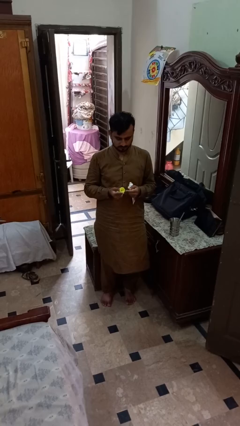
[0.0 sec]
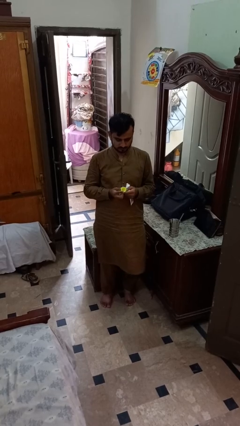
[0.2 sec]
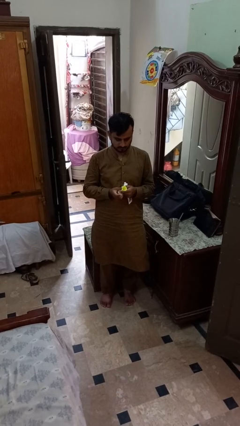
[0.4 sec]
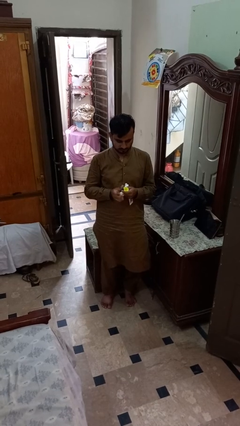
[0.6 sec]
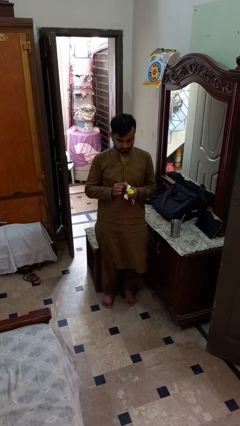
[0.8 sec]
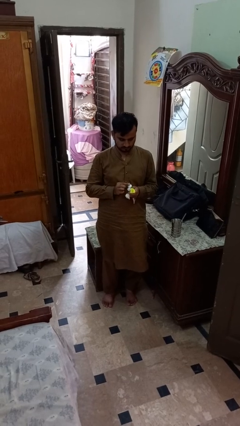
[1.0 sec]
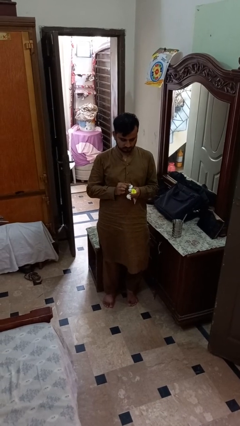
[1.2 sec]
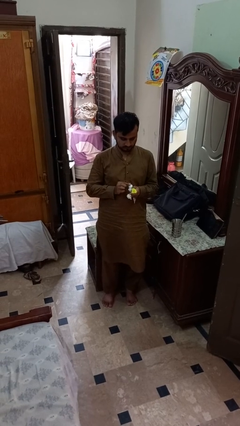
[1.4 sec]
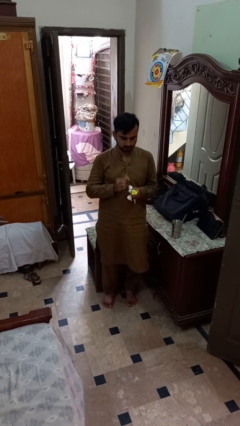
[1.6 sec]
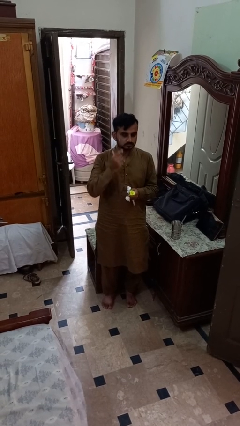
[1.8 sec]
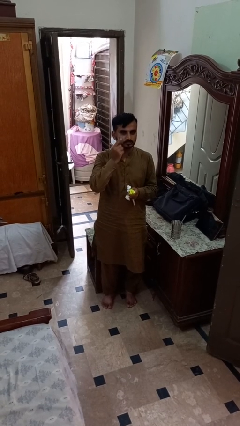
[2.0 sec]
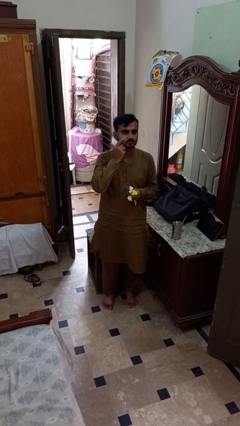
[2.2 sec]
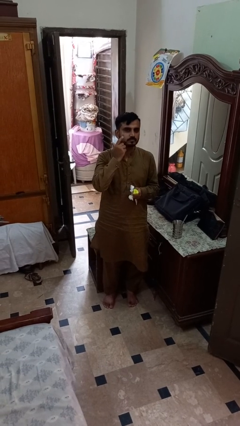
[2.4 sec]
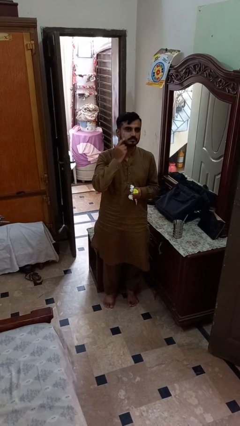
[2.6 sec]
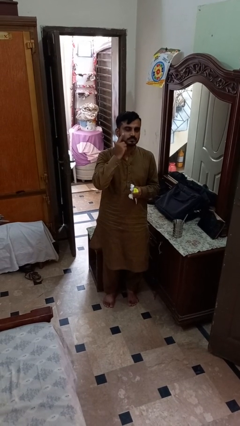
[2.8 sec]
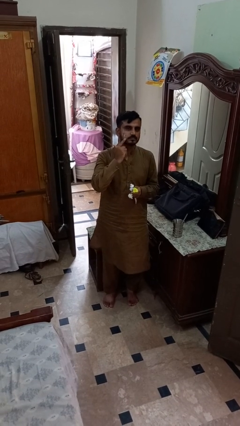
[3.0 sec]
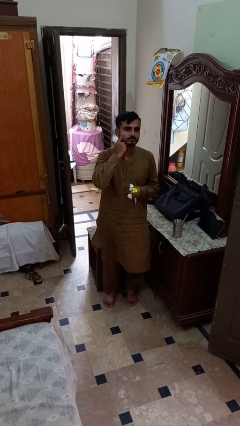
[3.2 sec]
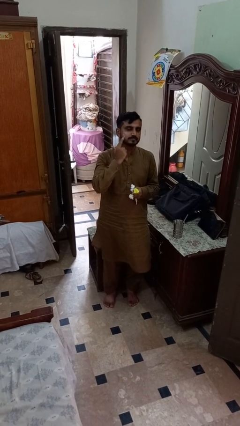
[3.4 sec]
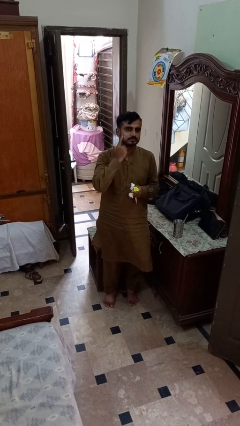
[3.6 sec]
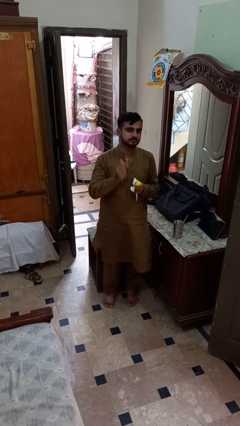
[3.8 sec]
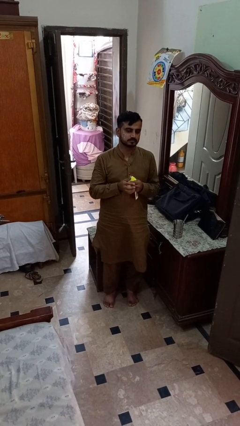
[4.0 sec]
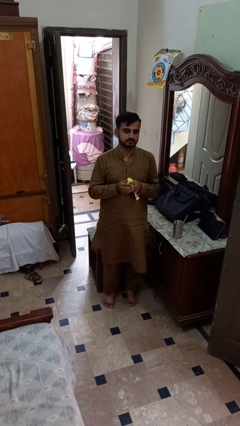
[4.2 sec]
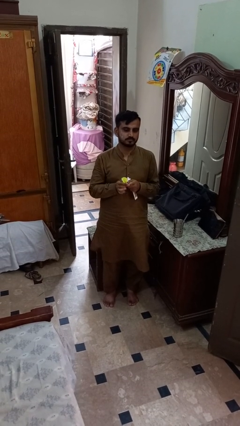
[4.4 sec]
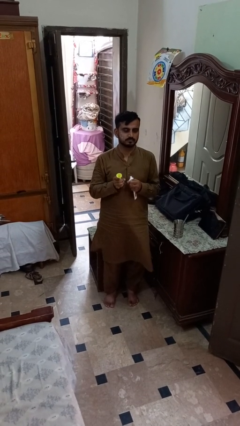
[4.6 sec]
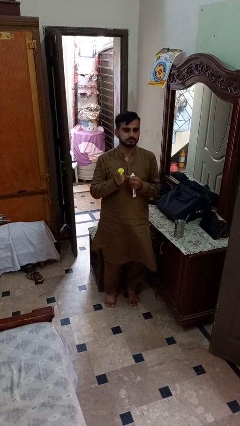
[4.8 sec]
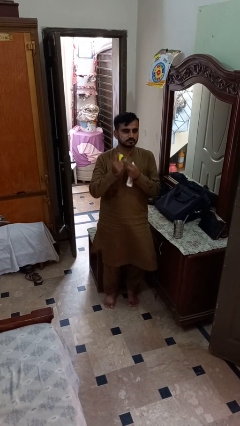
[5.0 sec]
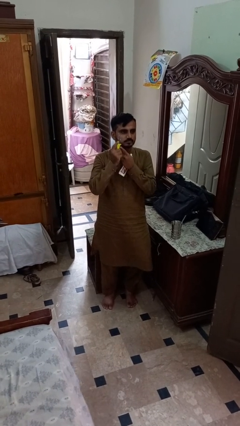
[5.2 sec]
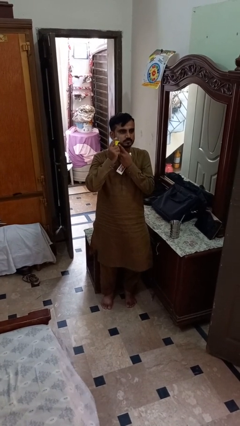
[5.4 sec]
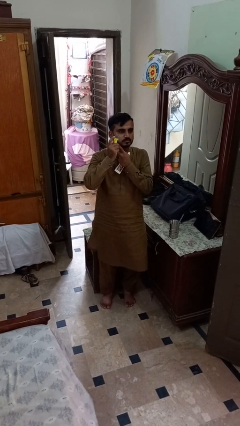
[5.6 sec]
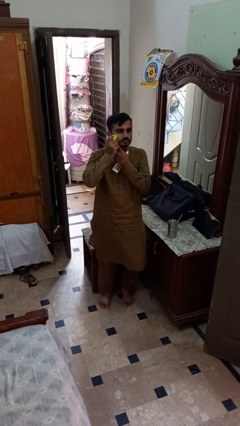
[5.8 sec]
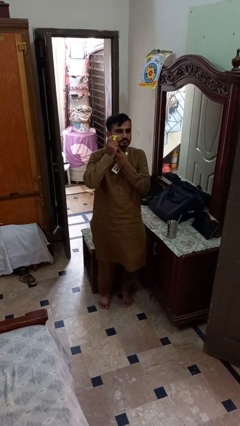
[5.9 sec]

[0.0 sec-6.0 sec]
person applies shaving cream

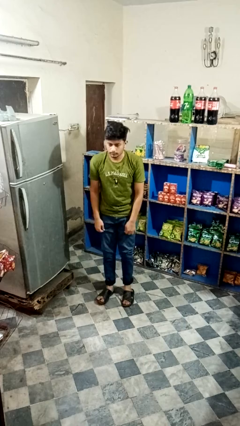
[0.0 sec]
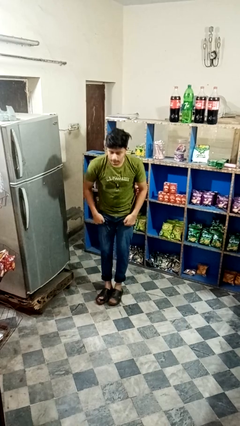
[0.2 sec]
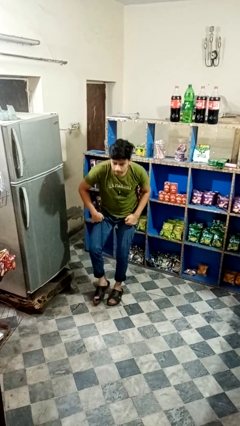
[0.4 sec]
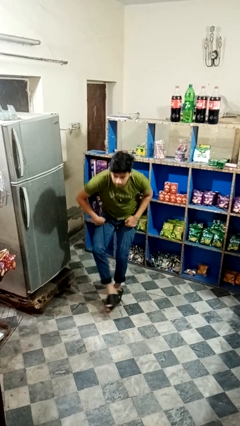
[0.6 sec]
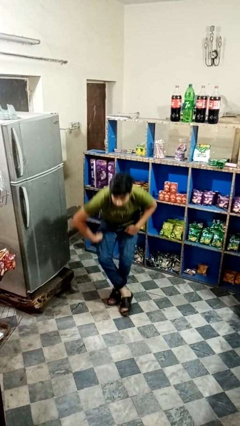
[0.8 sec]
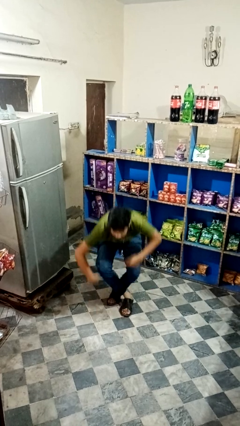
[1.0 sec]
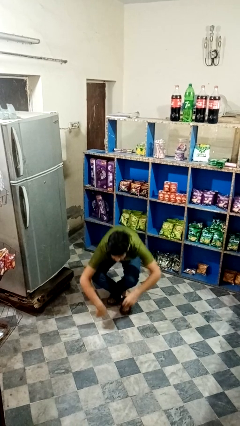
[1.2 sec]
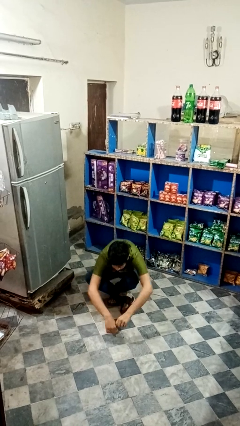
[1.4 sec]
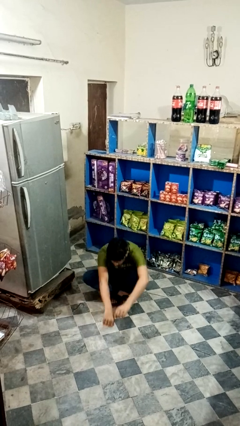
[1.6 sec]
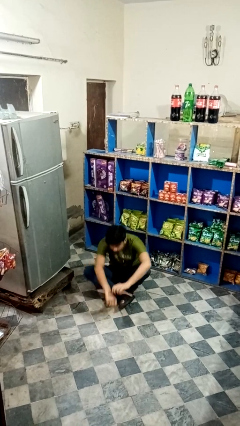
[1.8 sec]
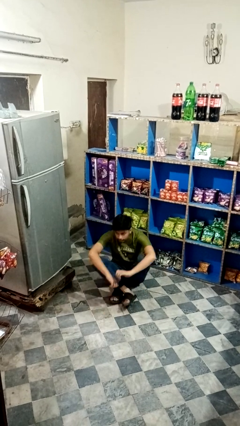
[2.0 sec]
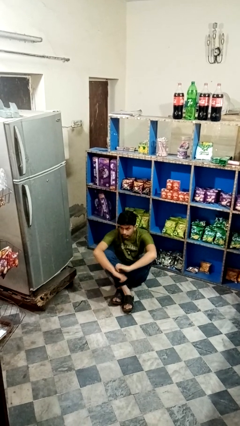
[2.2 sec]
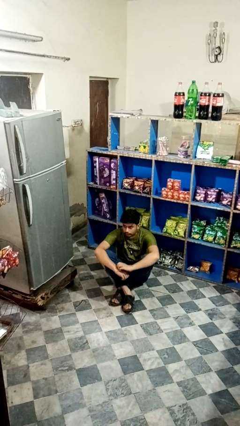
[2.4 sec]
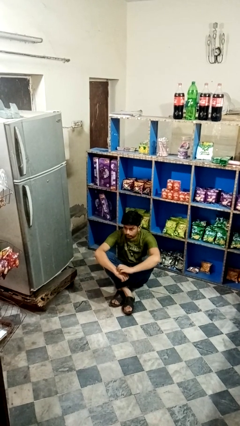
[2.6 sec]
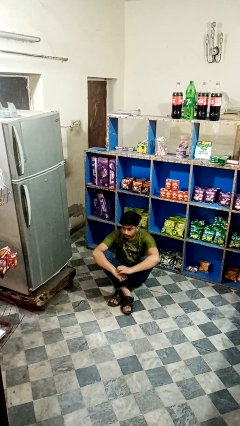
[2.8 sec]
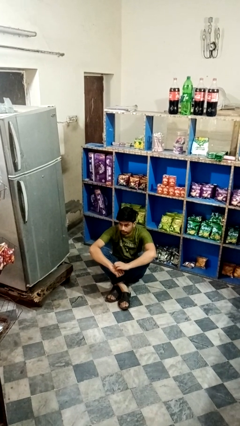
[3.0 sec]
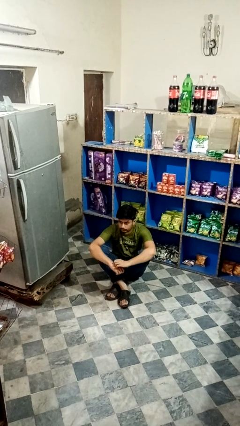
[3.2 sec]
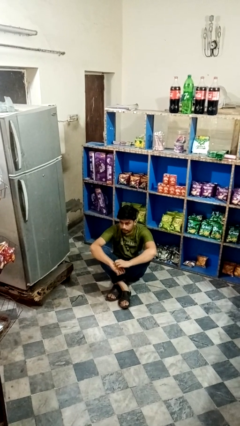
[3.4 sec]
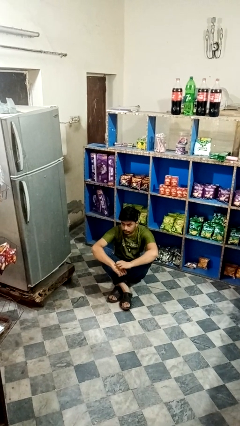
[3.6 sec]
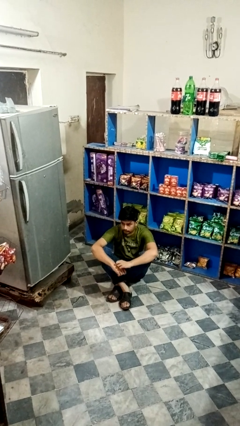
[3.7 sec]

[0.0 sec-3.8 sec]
person sits crisscross

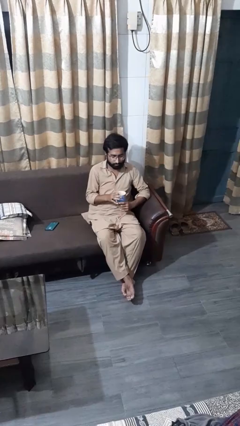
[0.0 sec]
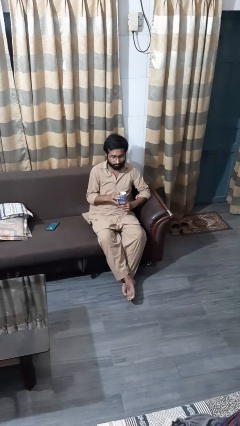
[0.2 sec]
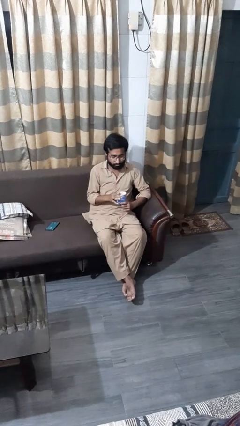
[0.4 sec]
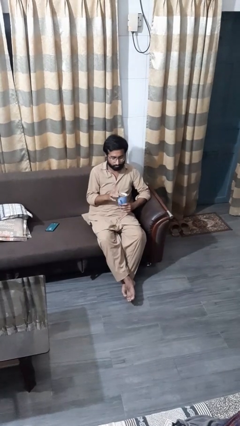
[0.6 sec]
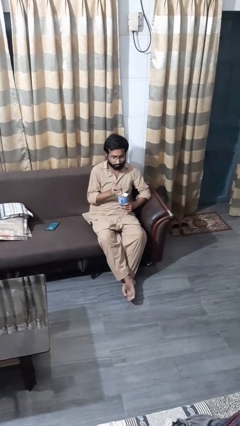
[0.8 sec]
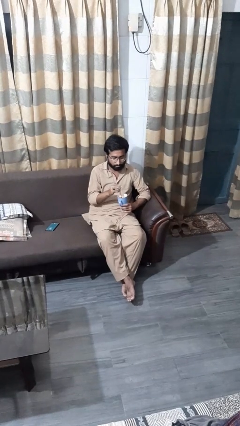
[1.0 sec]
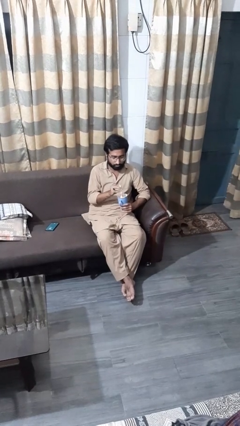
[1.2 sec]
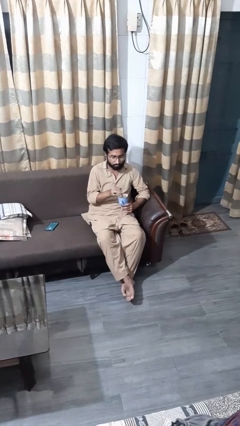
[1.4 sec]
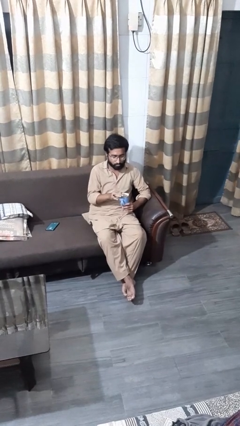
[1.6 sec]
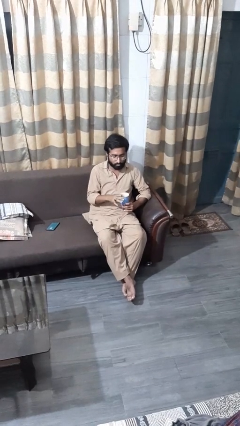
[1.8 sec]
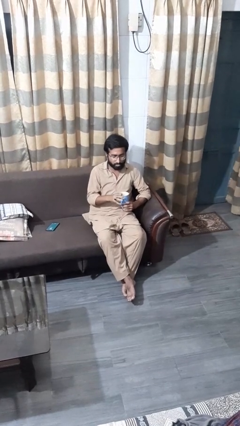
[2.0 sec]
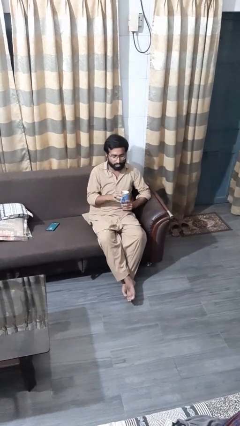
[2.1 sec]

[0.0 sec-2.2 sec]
person stirs mug

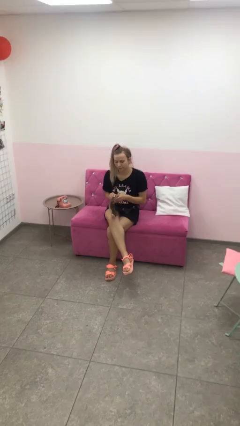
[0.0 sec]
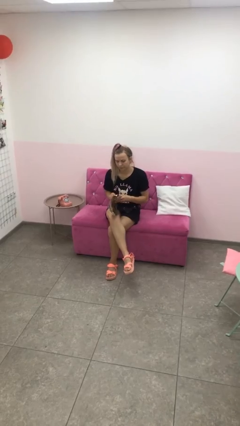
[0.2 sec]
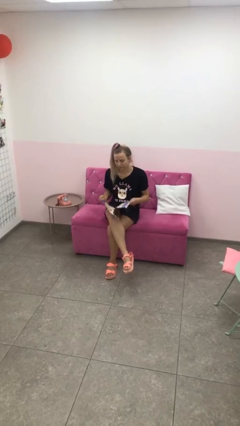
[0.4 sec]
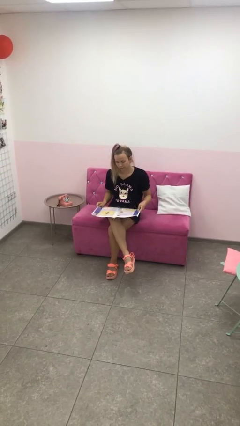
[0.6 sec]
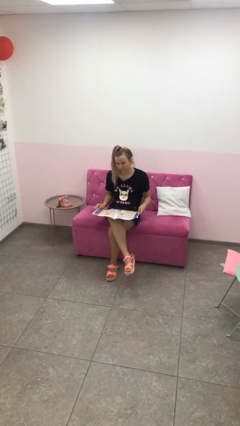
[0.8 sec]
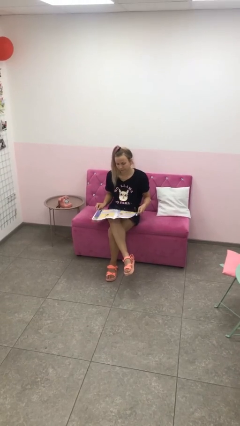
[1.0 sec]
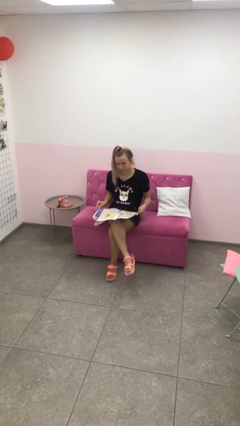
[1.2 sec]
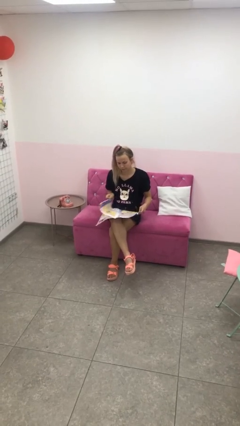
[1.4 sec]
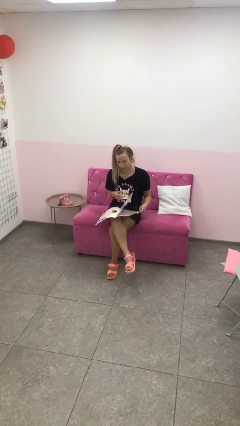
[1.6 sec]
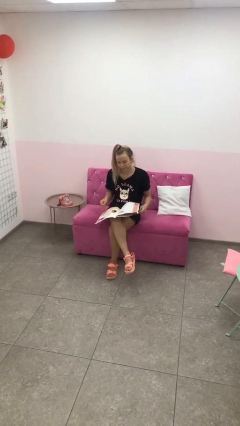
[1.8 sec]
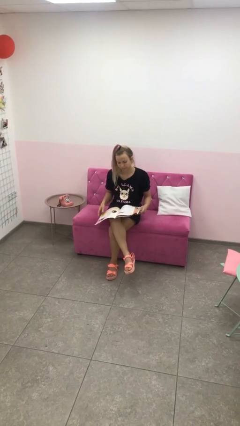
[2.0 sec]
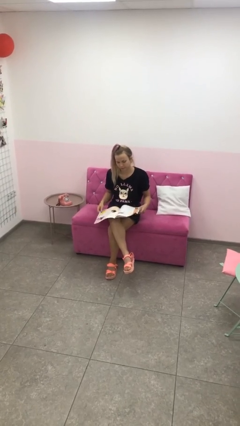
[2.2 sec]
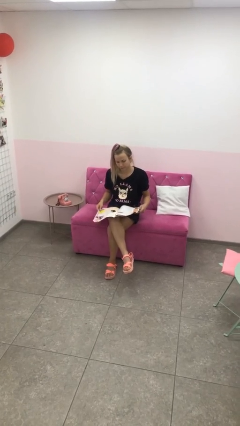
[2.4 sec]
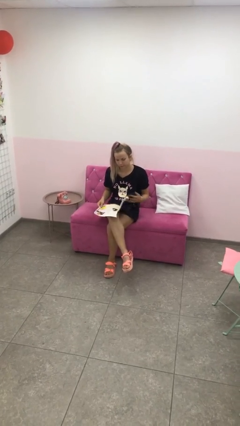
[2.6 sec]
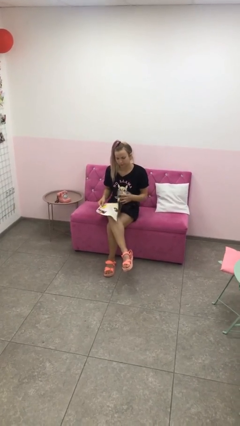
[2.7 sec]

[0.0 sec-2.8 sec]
person reads magazine

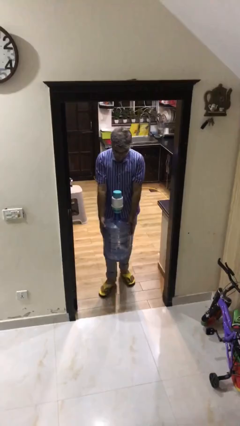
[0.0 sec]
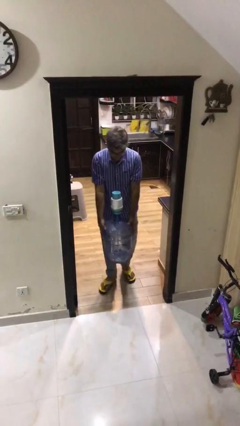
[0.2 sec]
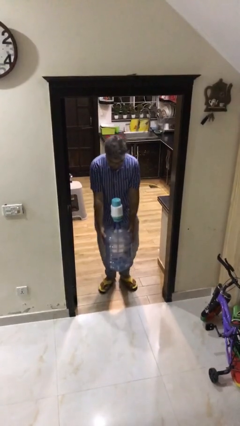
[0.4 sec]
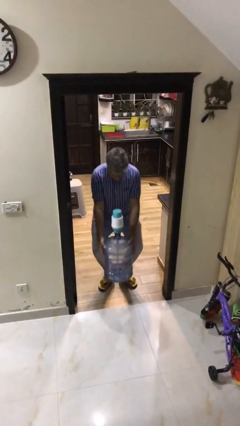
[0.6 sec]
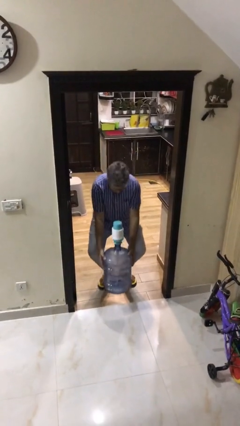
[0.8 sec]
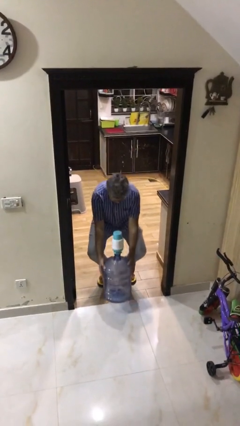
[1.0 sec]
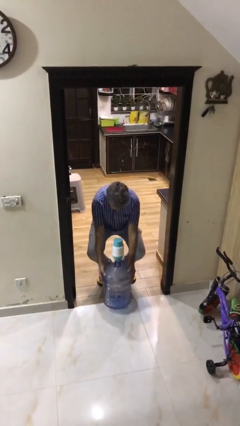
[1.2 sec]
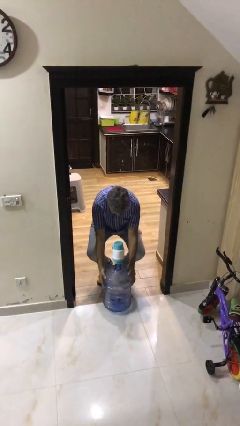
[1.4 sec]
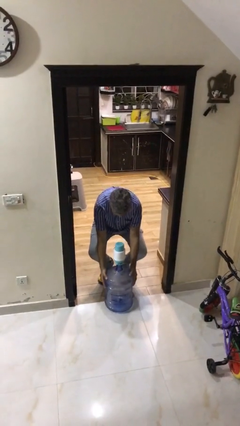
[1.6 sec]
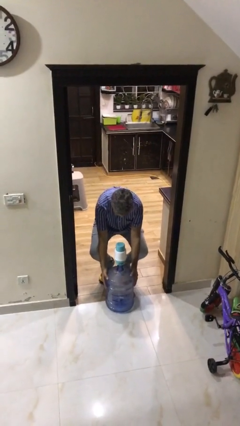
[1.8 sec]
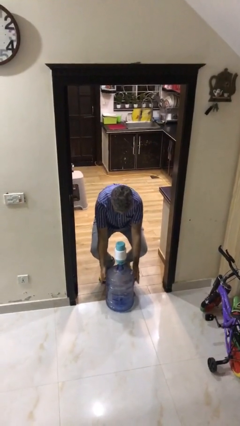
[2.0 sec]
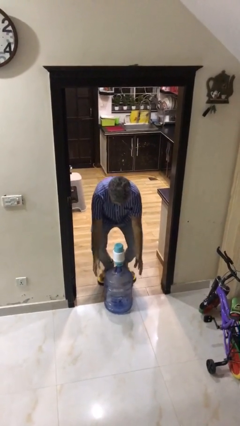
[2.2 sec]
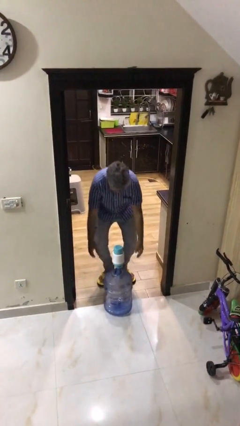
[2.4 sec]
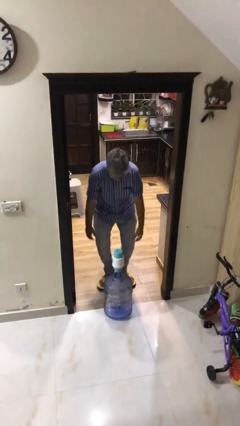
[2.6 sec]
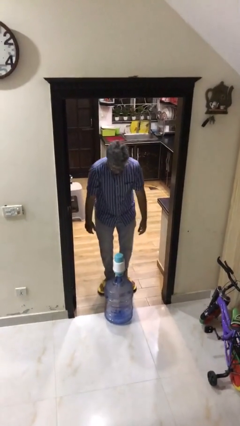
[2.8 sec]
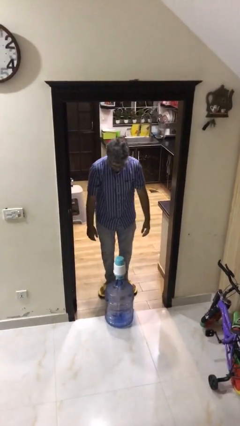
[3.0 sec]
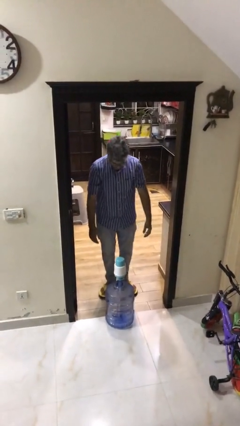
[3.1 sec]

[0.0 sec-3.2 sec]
person puts down object on floor
